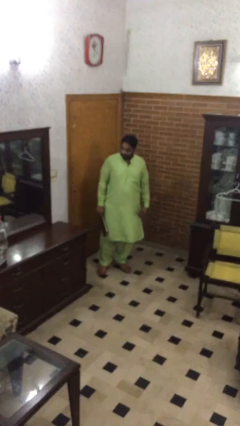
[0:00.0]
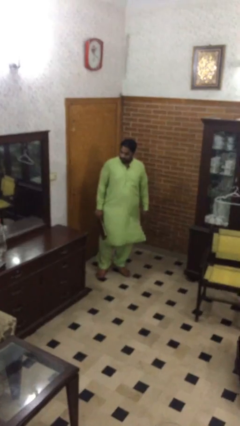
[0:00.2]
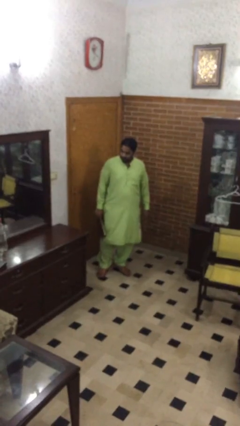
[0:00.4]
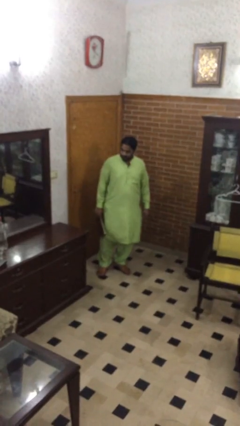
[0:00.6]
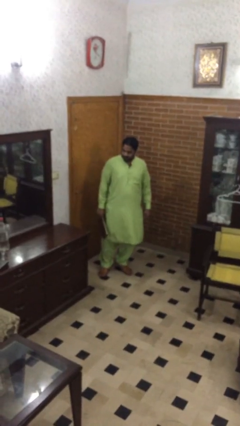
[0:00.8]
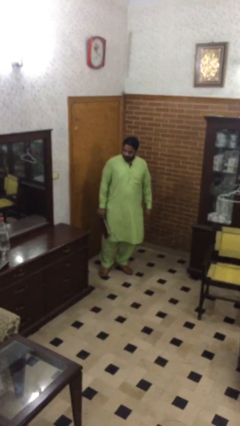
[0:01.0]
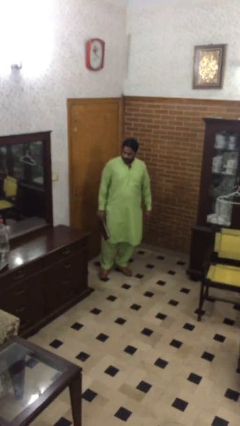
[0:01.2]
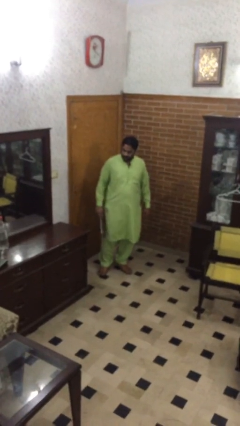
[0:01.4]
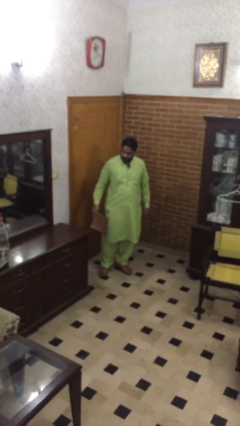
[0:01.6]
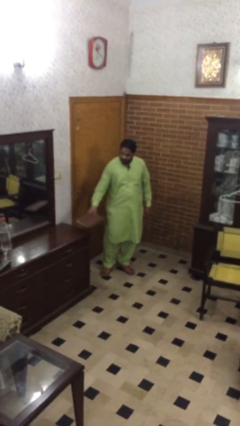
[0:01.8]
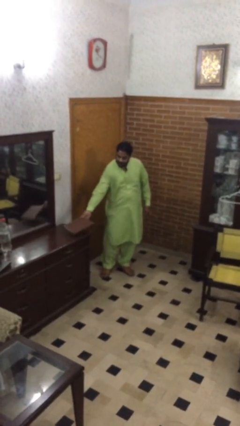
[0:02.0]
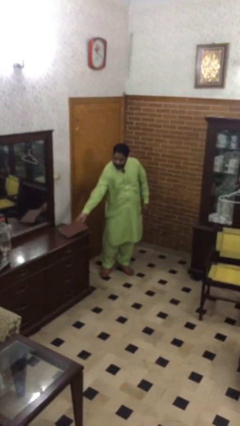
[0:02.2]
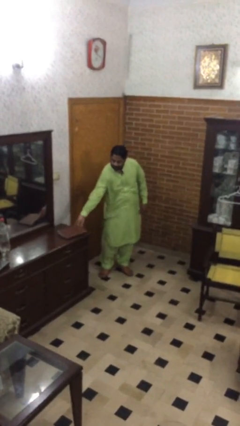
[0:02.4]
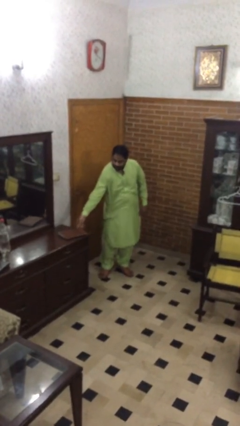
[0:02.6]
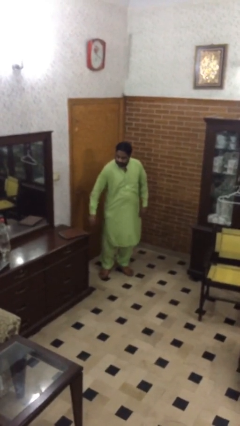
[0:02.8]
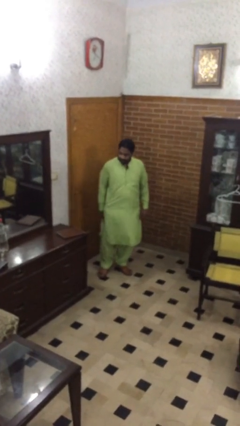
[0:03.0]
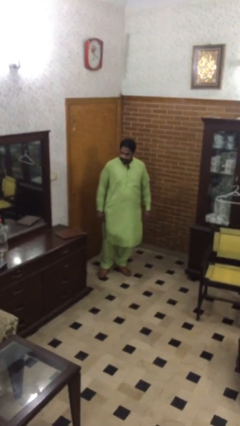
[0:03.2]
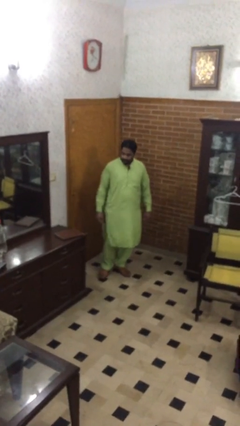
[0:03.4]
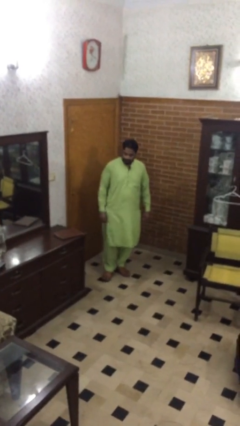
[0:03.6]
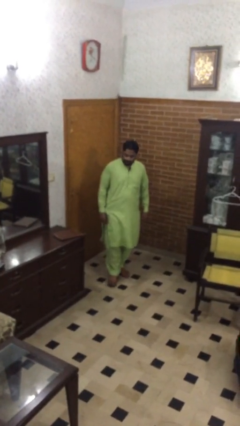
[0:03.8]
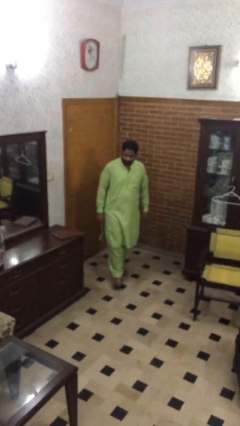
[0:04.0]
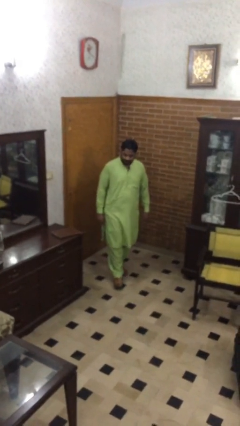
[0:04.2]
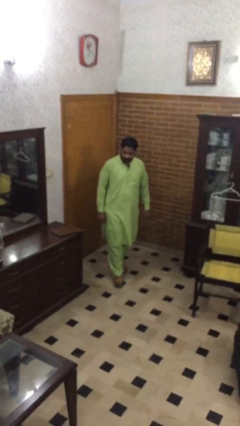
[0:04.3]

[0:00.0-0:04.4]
person puts down object on table

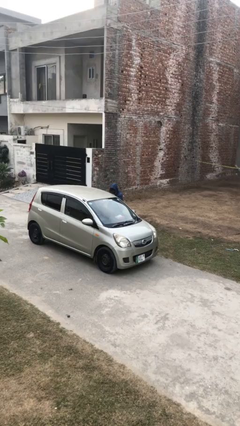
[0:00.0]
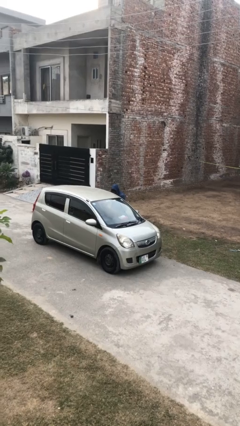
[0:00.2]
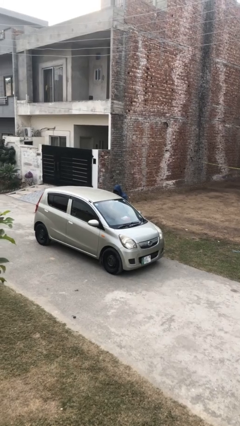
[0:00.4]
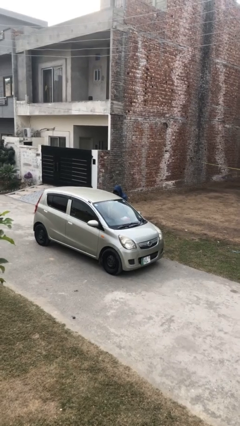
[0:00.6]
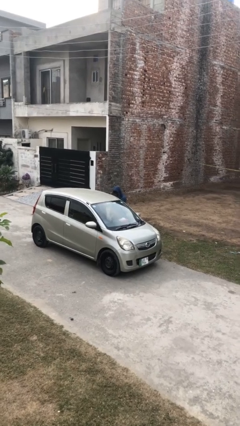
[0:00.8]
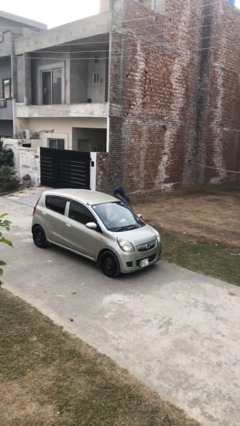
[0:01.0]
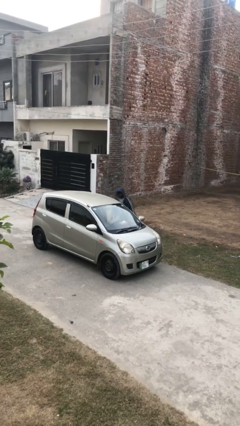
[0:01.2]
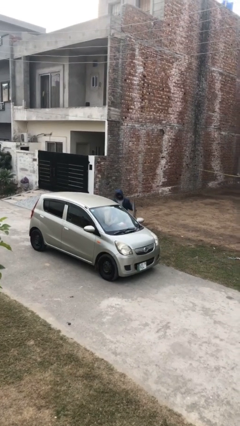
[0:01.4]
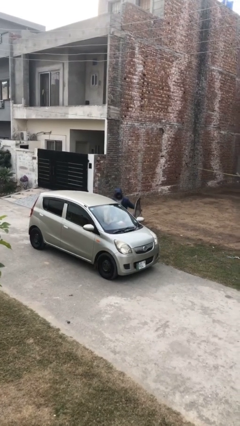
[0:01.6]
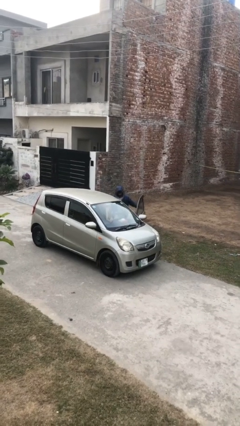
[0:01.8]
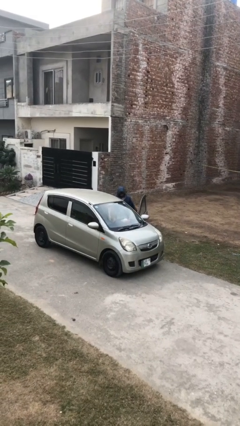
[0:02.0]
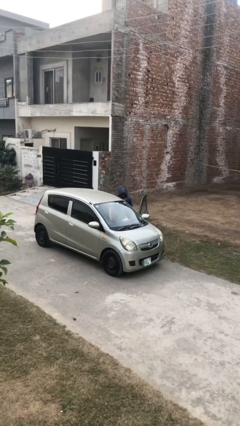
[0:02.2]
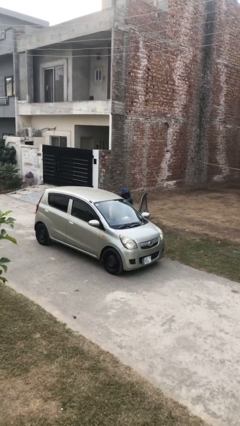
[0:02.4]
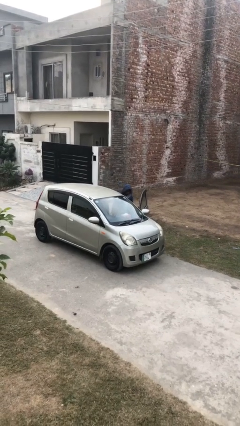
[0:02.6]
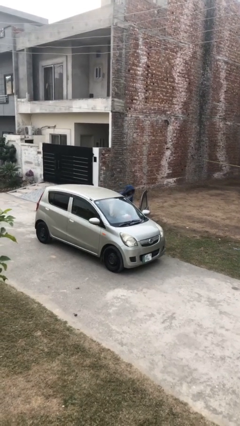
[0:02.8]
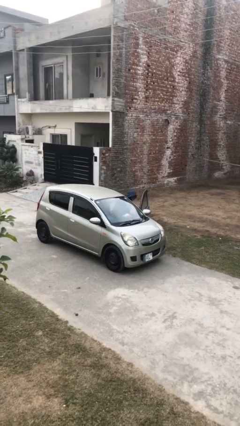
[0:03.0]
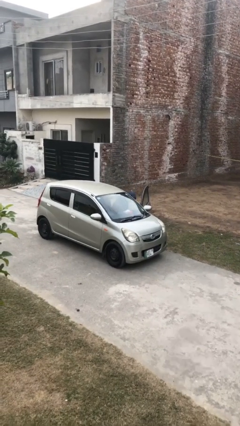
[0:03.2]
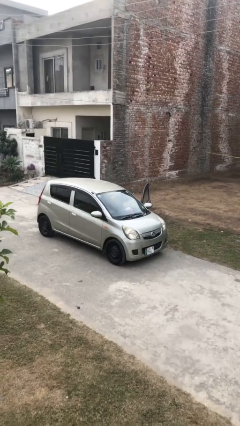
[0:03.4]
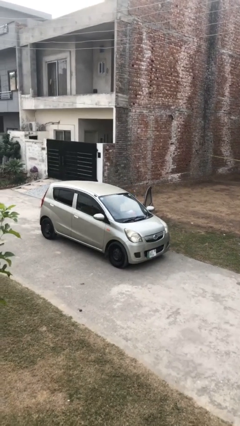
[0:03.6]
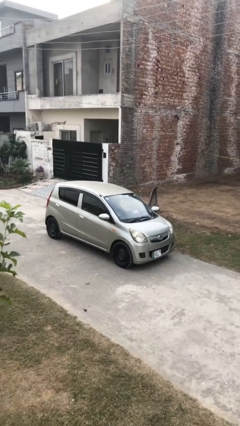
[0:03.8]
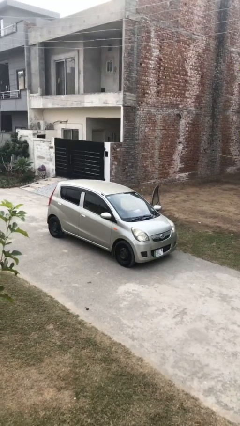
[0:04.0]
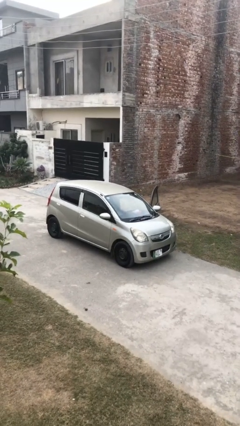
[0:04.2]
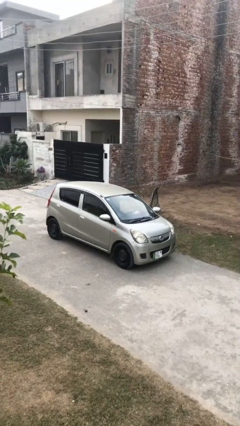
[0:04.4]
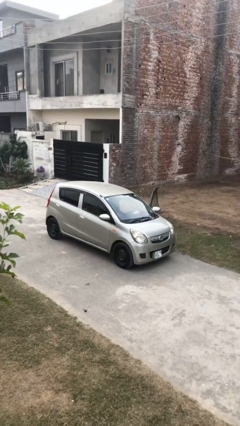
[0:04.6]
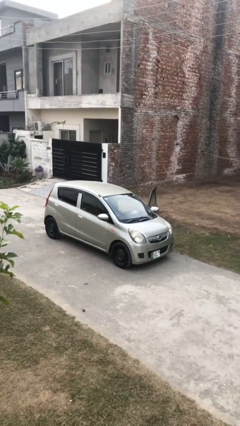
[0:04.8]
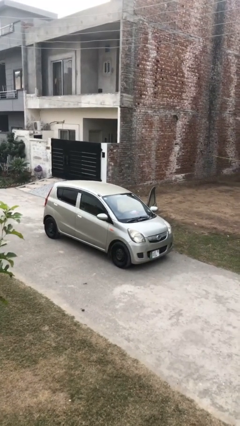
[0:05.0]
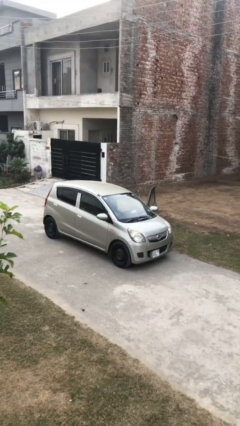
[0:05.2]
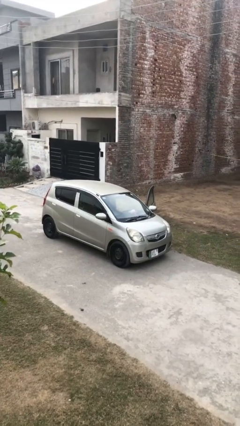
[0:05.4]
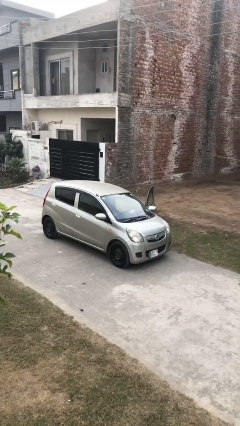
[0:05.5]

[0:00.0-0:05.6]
person enters car

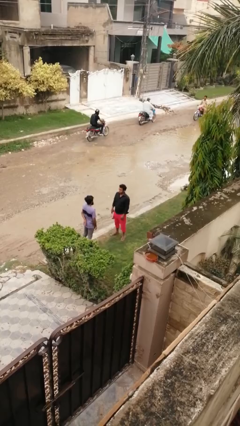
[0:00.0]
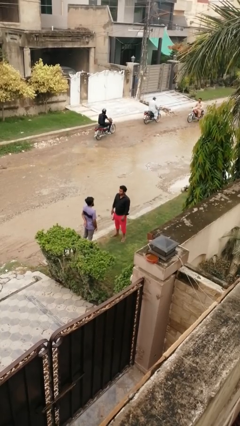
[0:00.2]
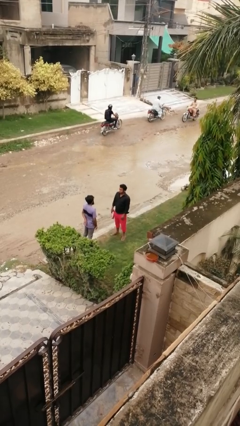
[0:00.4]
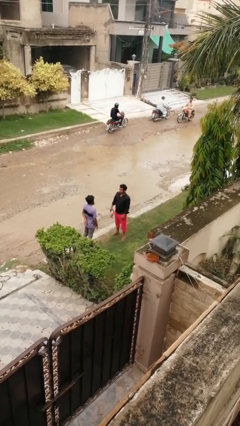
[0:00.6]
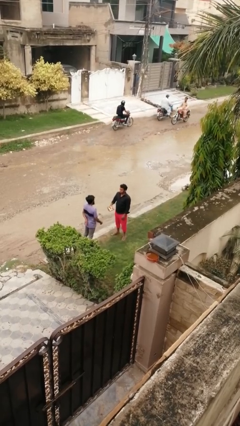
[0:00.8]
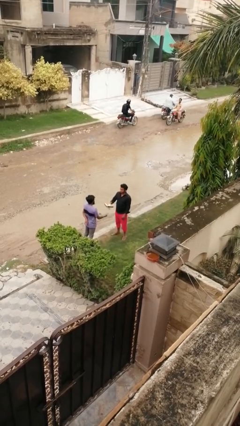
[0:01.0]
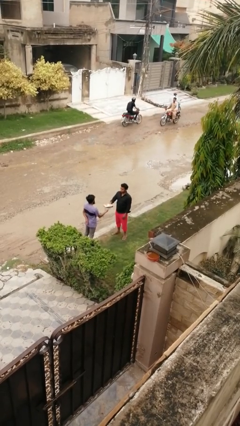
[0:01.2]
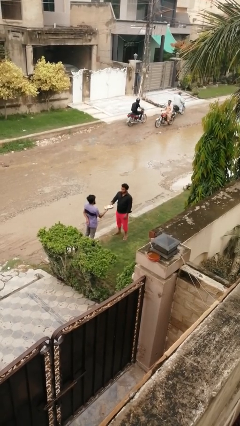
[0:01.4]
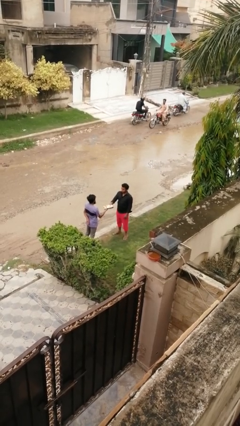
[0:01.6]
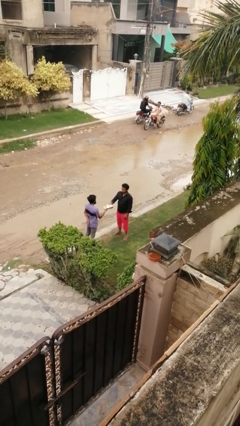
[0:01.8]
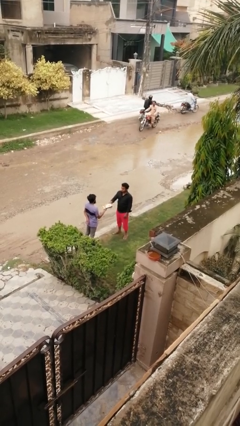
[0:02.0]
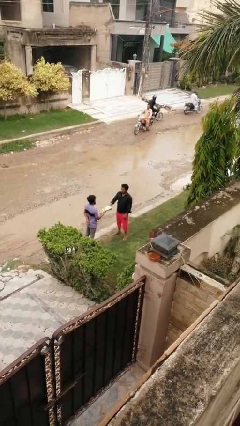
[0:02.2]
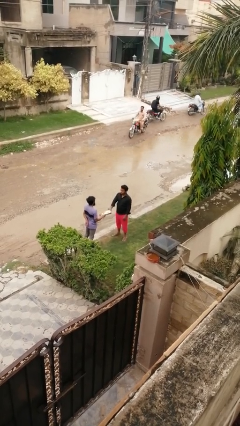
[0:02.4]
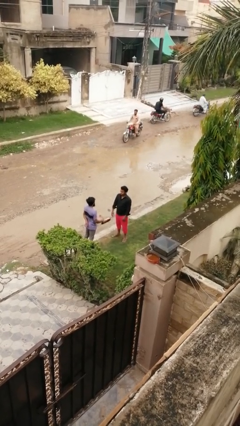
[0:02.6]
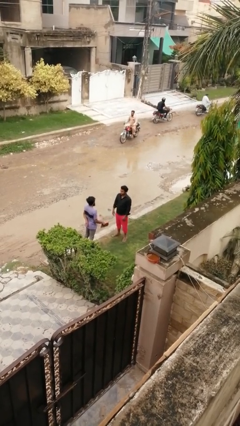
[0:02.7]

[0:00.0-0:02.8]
person transfers object to person

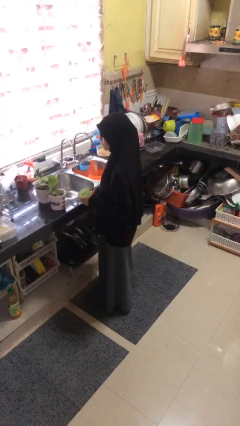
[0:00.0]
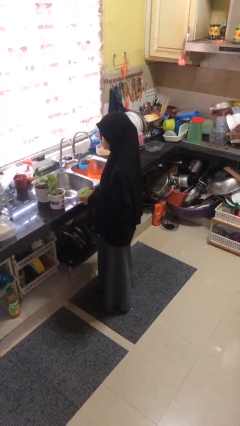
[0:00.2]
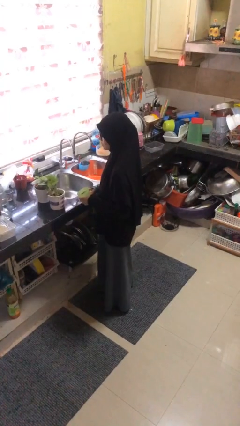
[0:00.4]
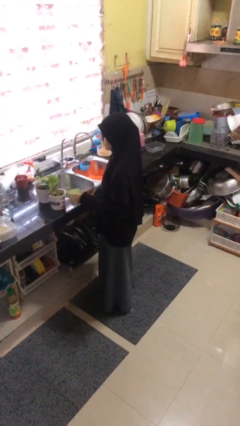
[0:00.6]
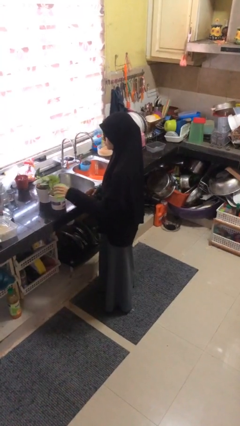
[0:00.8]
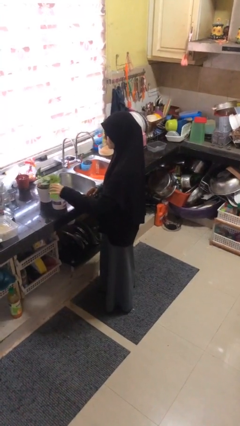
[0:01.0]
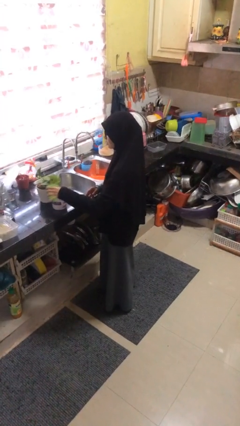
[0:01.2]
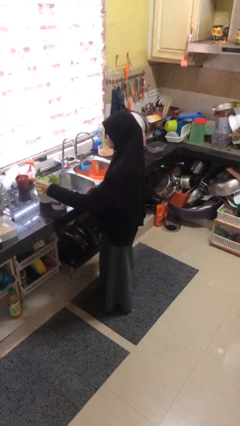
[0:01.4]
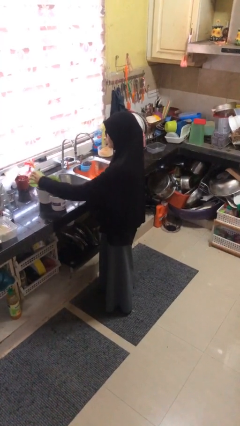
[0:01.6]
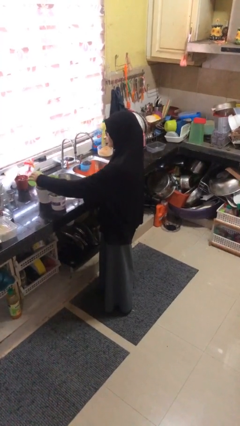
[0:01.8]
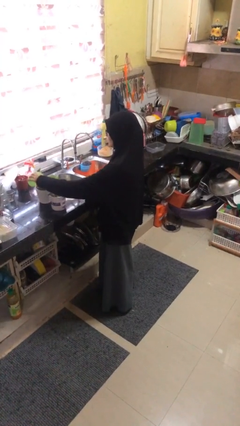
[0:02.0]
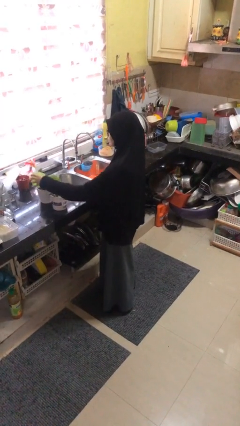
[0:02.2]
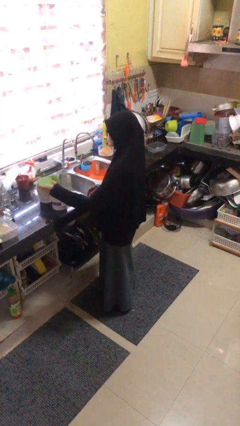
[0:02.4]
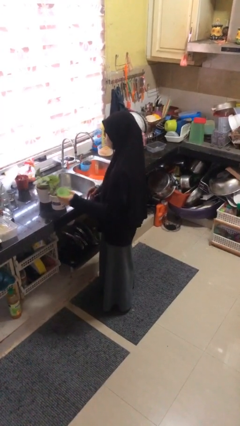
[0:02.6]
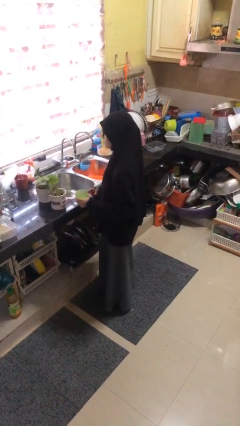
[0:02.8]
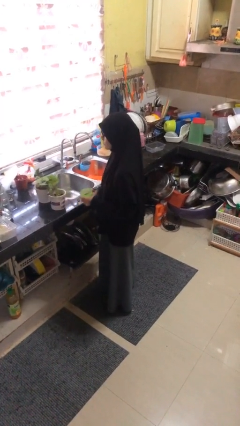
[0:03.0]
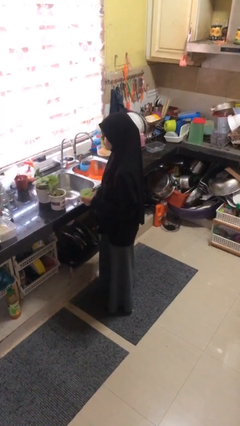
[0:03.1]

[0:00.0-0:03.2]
person waters houseplant

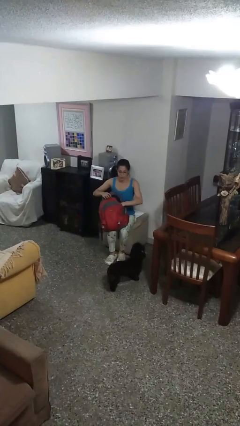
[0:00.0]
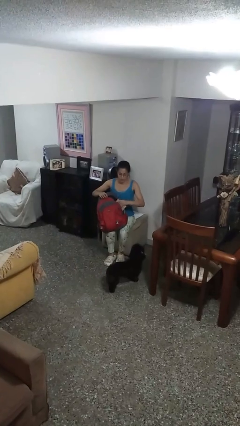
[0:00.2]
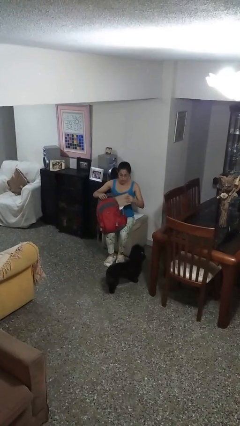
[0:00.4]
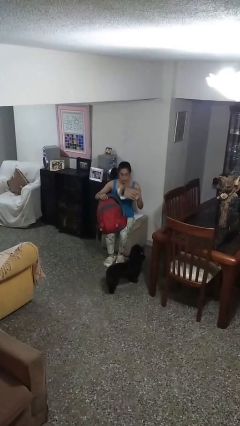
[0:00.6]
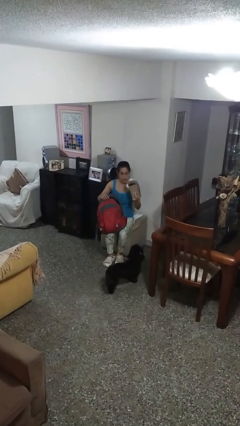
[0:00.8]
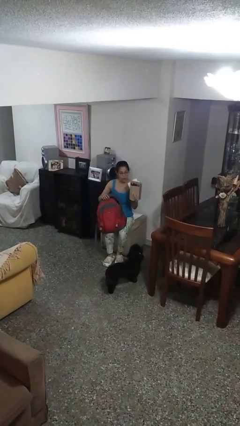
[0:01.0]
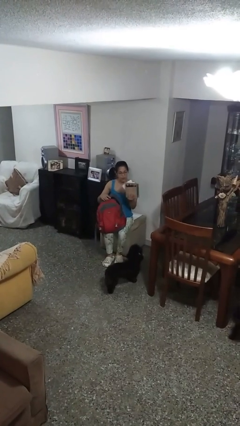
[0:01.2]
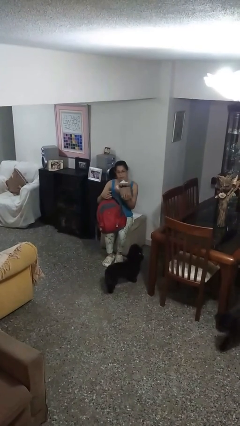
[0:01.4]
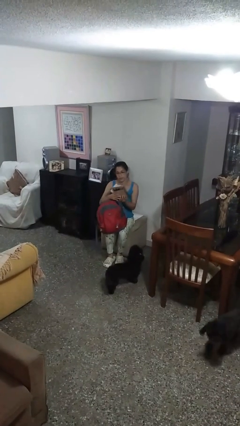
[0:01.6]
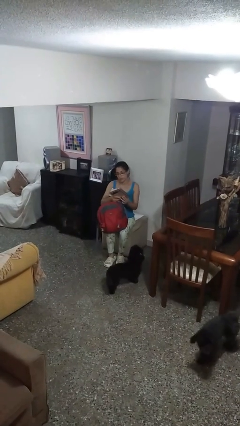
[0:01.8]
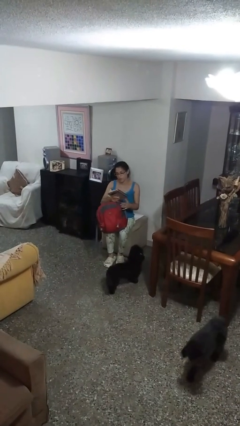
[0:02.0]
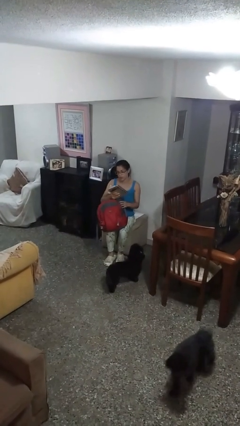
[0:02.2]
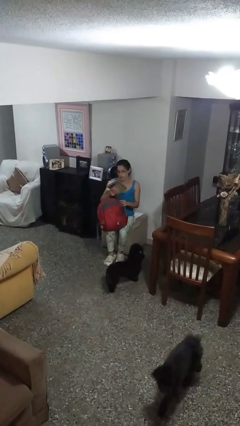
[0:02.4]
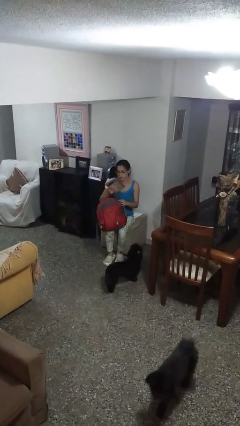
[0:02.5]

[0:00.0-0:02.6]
person takes object from backpack
